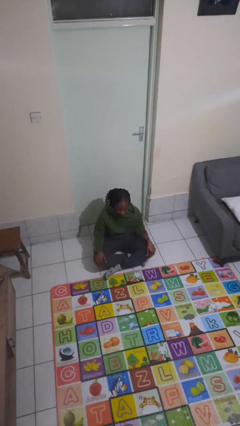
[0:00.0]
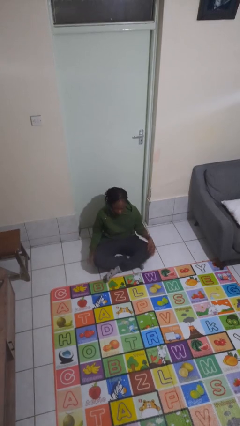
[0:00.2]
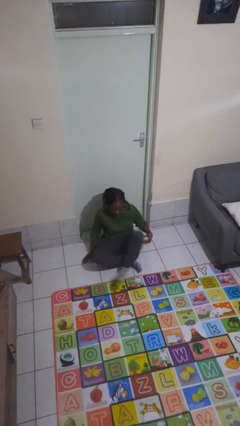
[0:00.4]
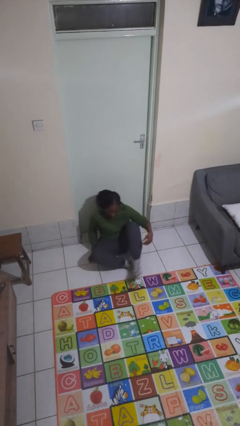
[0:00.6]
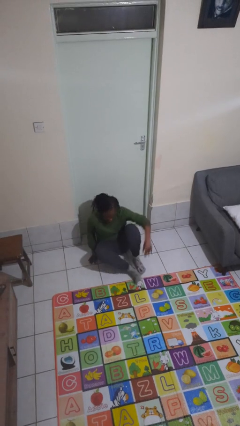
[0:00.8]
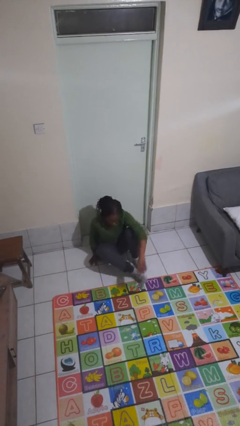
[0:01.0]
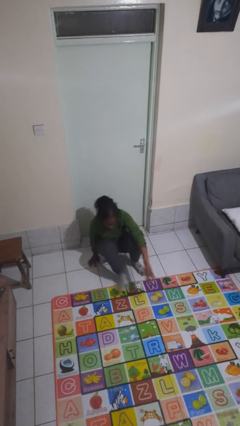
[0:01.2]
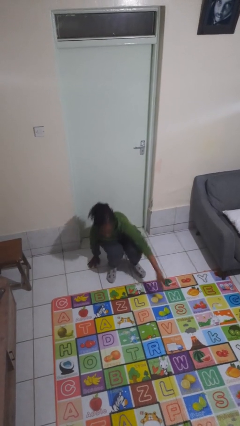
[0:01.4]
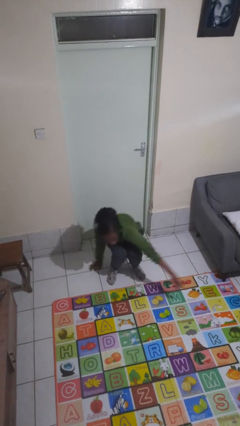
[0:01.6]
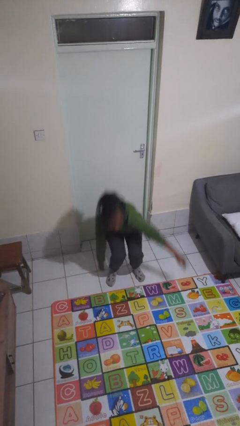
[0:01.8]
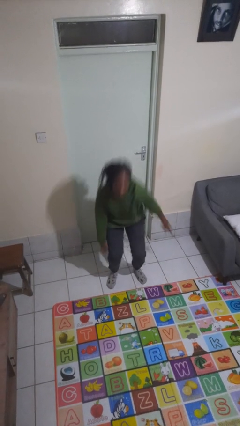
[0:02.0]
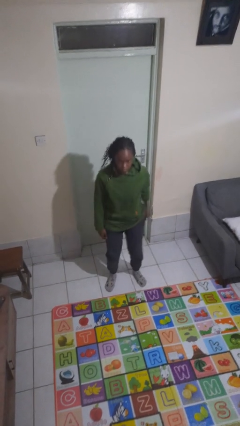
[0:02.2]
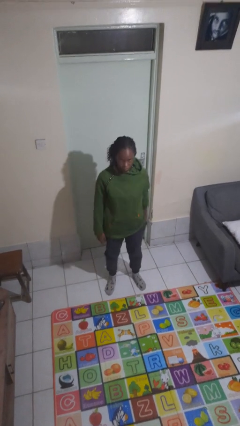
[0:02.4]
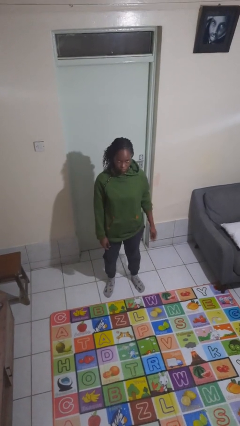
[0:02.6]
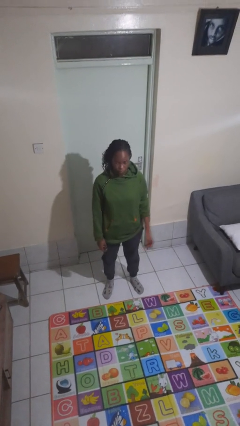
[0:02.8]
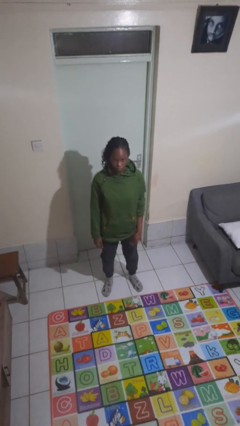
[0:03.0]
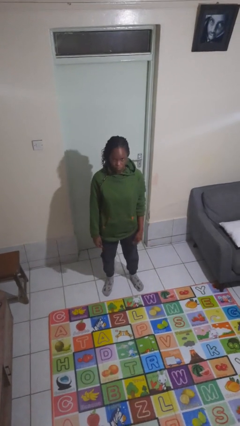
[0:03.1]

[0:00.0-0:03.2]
person stands up from floor

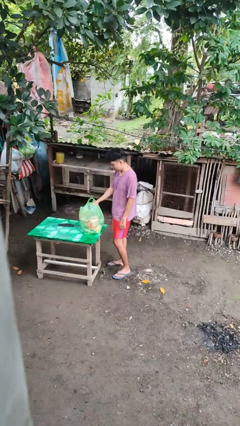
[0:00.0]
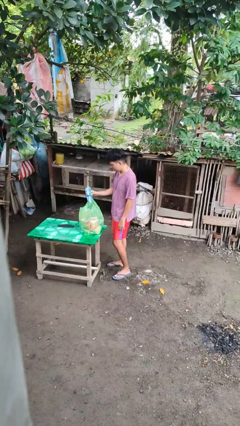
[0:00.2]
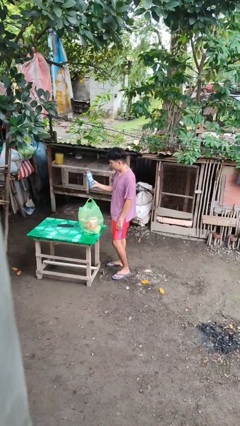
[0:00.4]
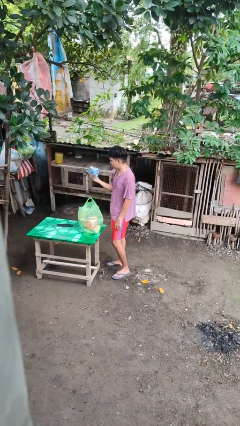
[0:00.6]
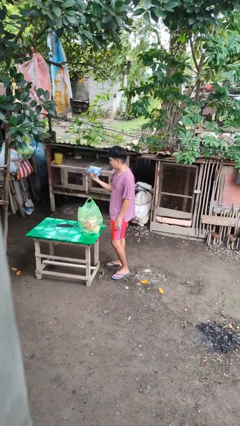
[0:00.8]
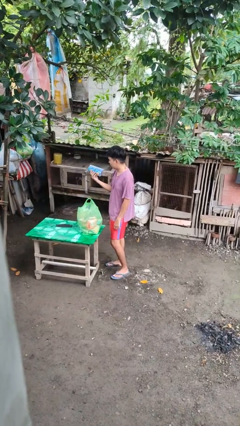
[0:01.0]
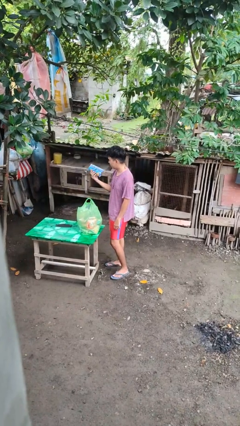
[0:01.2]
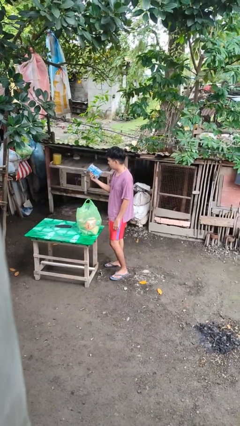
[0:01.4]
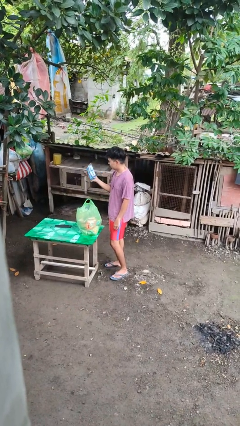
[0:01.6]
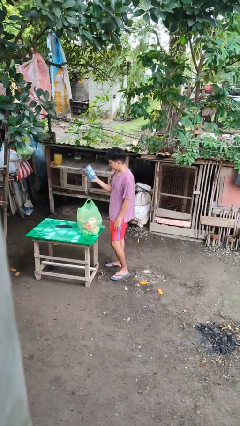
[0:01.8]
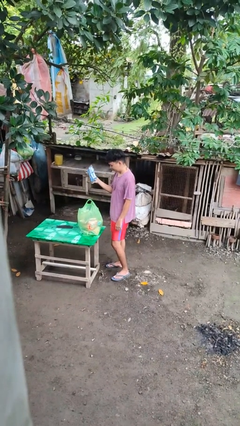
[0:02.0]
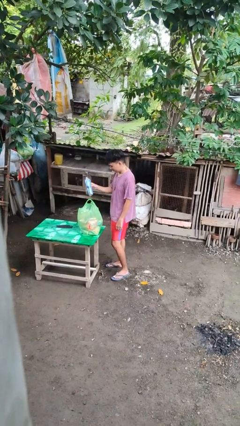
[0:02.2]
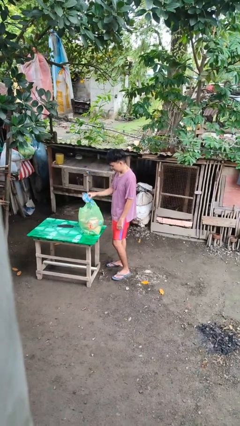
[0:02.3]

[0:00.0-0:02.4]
person takes object from bag

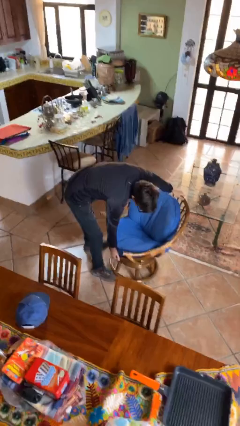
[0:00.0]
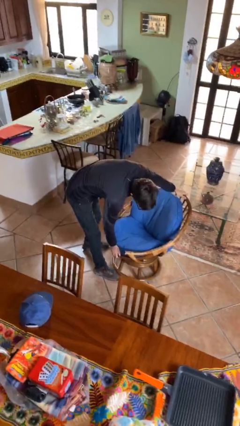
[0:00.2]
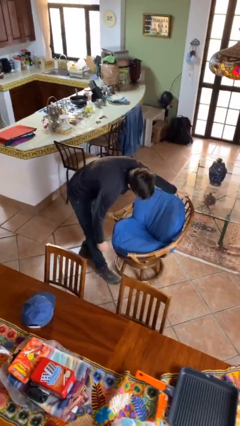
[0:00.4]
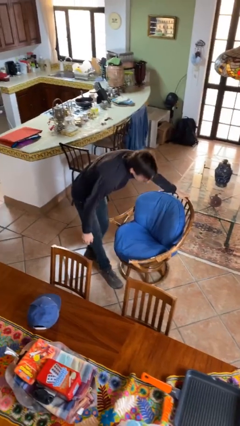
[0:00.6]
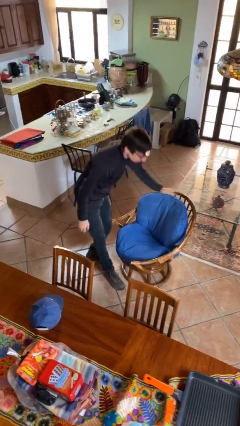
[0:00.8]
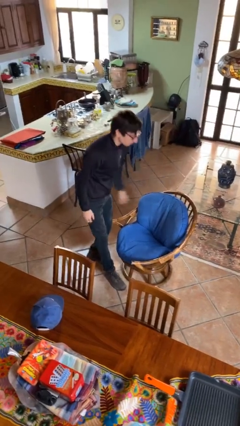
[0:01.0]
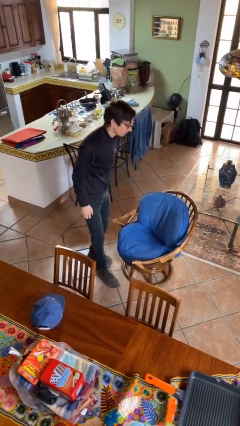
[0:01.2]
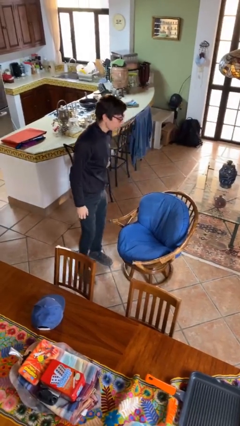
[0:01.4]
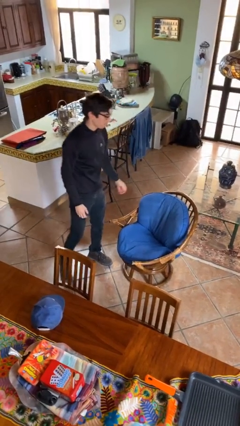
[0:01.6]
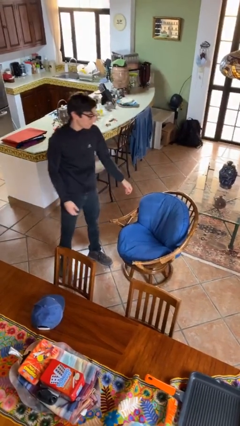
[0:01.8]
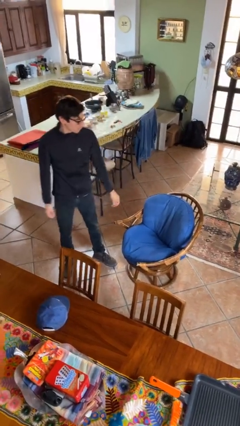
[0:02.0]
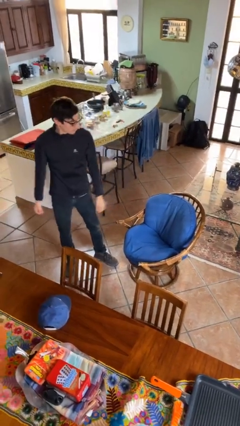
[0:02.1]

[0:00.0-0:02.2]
person puts down object on floor

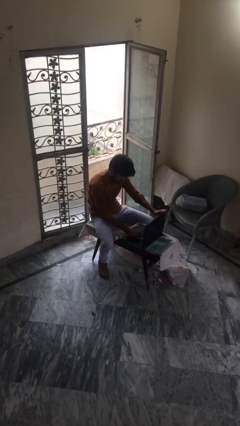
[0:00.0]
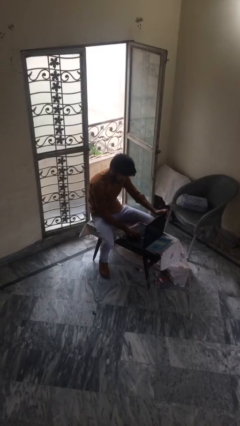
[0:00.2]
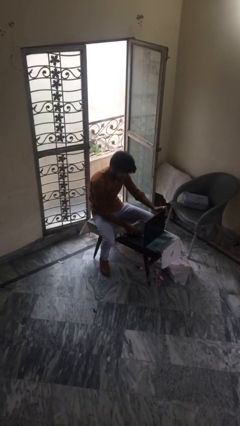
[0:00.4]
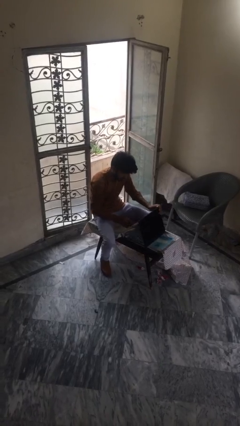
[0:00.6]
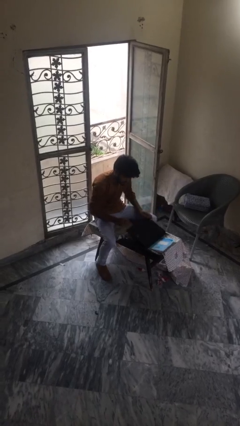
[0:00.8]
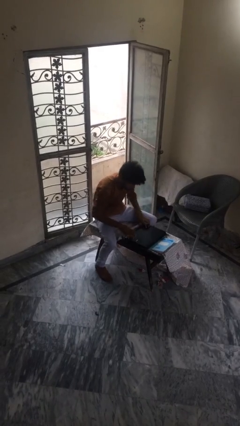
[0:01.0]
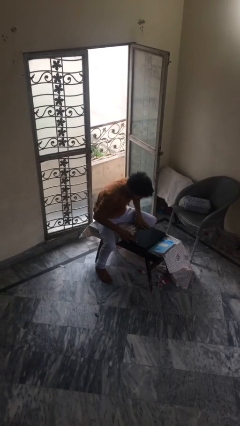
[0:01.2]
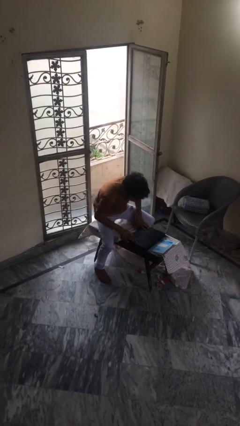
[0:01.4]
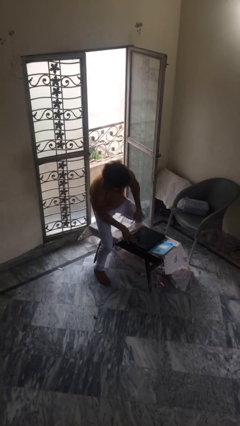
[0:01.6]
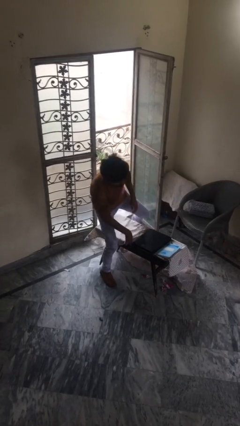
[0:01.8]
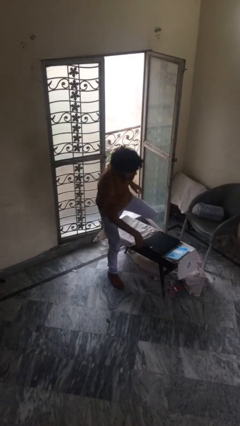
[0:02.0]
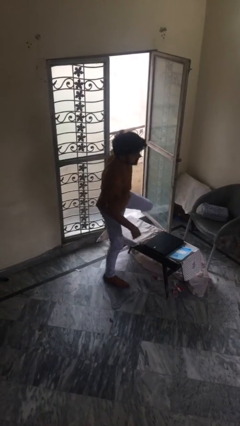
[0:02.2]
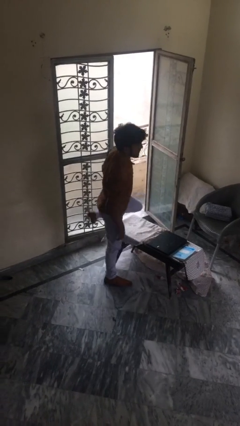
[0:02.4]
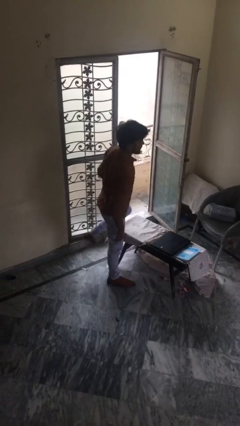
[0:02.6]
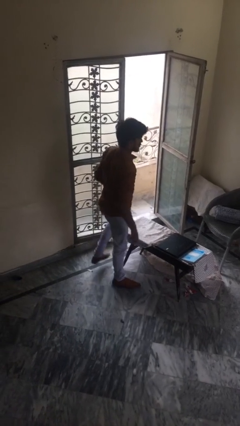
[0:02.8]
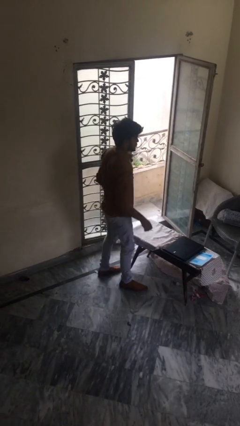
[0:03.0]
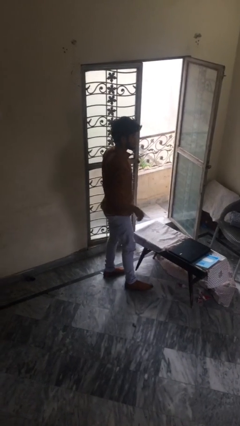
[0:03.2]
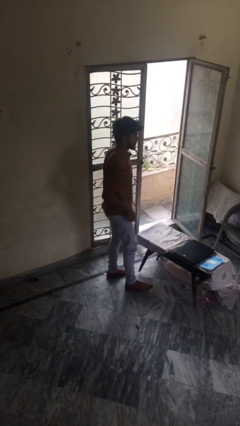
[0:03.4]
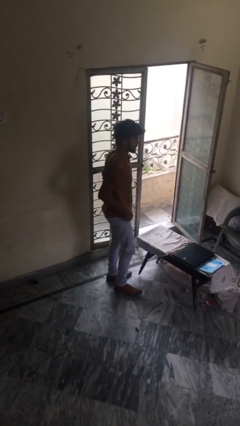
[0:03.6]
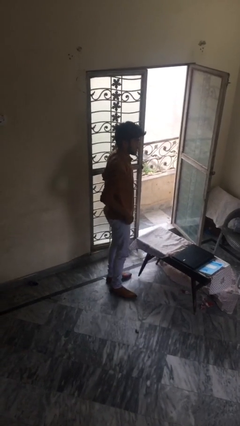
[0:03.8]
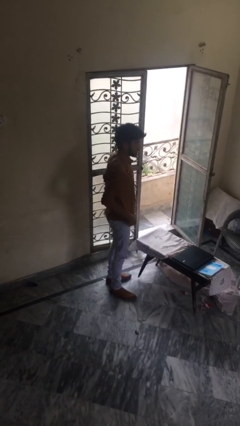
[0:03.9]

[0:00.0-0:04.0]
person stands up

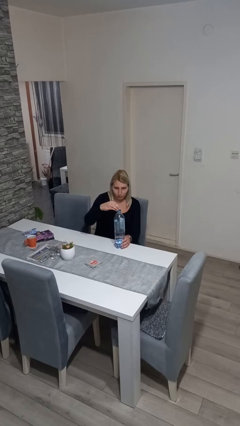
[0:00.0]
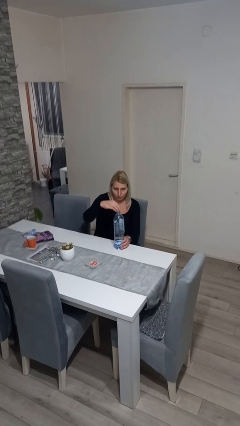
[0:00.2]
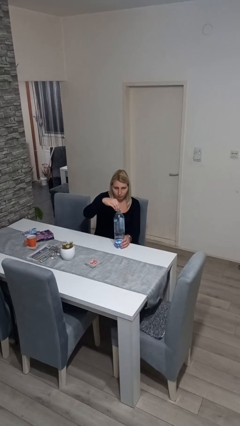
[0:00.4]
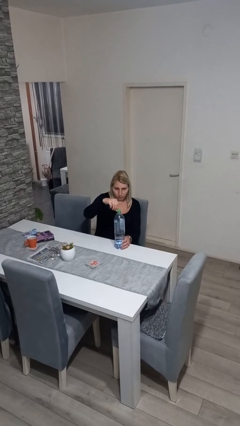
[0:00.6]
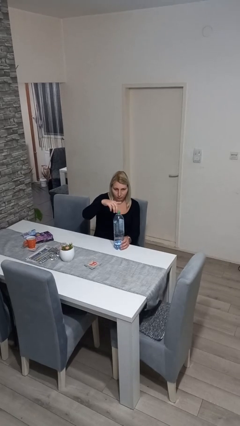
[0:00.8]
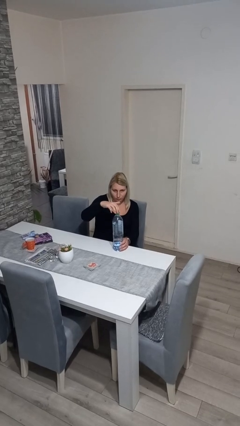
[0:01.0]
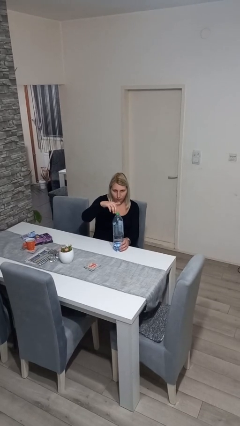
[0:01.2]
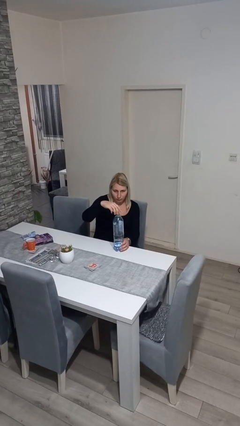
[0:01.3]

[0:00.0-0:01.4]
person screws lid to bottle

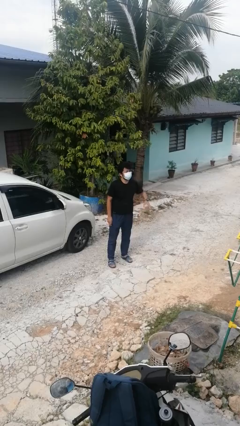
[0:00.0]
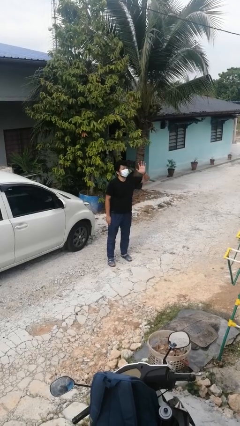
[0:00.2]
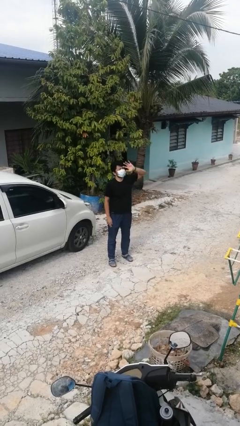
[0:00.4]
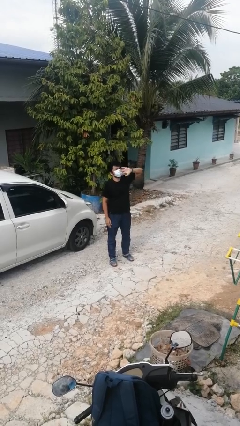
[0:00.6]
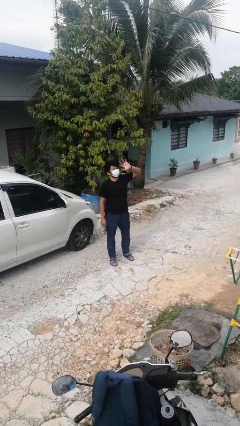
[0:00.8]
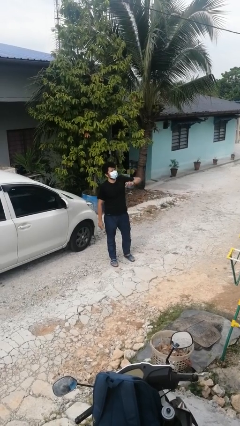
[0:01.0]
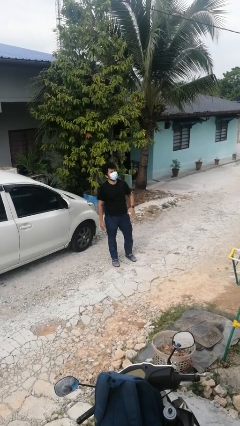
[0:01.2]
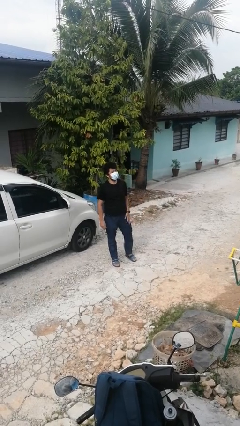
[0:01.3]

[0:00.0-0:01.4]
person waves at person

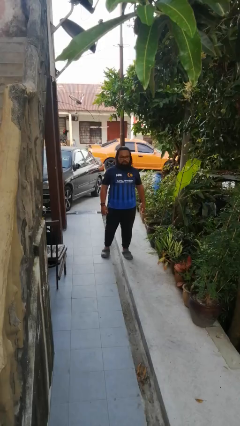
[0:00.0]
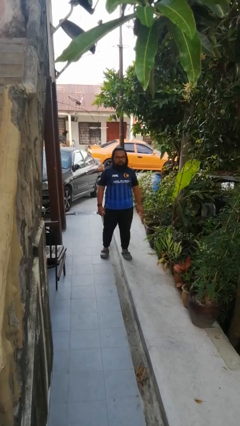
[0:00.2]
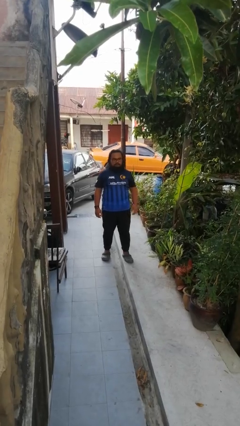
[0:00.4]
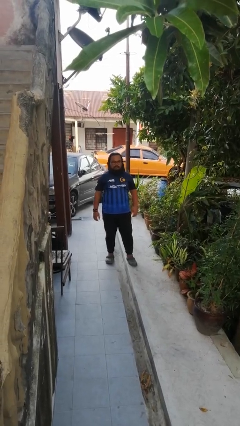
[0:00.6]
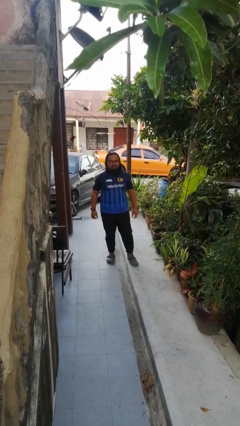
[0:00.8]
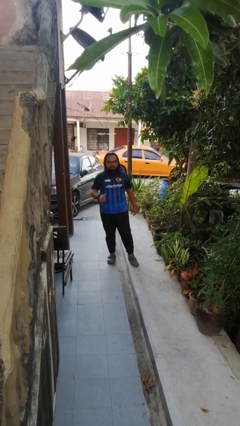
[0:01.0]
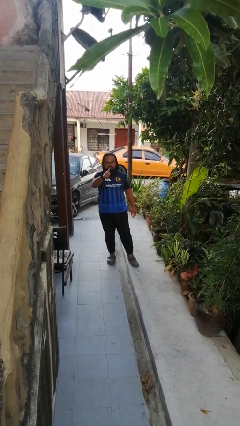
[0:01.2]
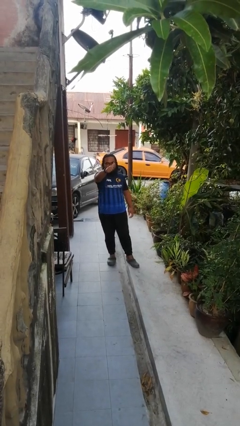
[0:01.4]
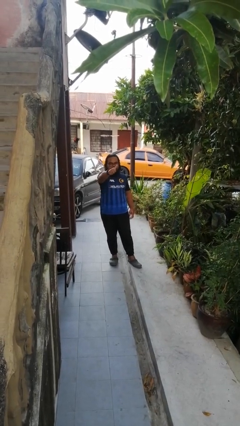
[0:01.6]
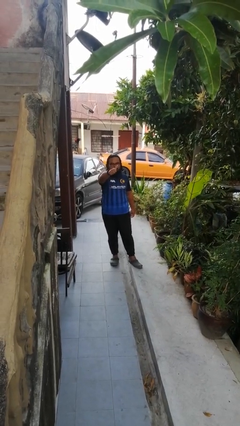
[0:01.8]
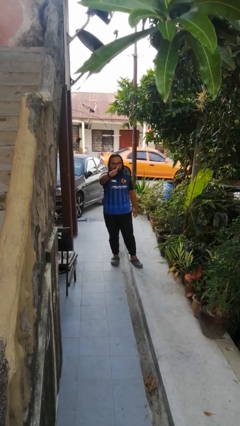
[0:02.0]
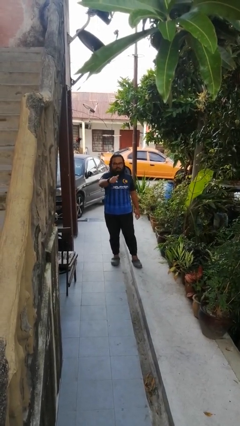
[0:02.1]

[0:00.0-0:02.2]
person gestures thumbs up

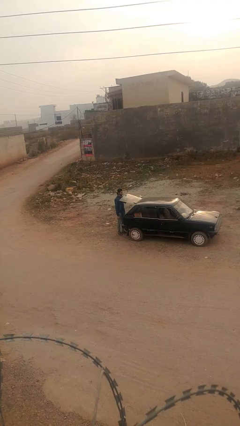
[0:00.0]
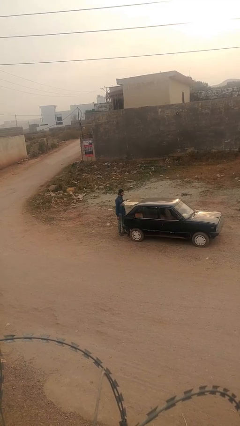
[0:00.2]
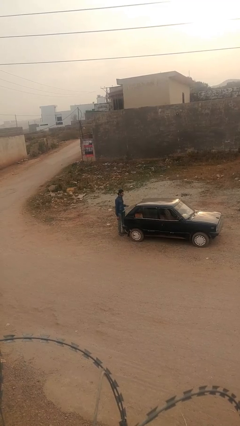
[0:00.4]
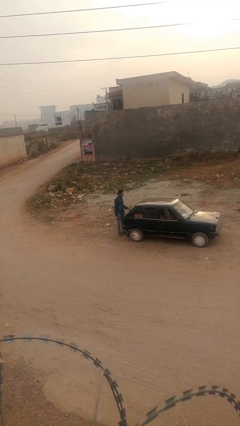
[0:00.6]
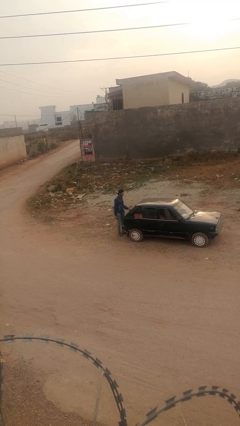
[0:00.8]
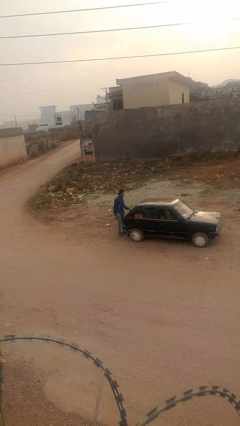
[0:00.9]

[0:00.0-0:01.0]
person closes car trunk
